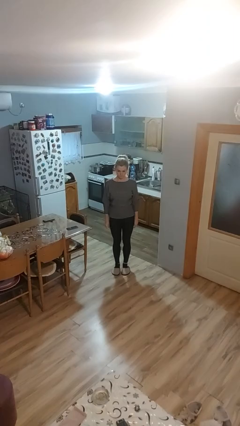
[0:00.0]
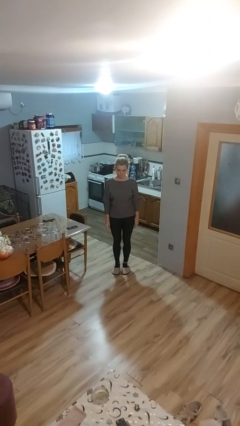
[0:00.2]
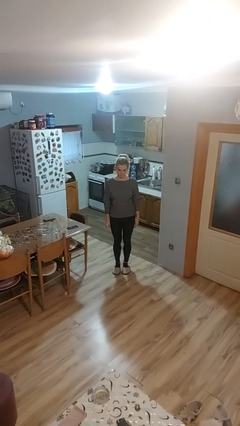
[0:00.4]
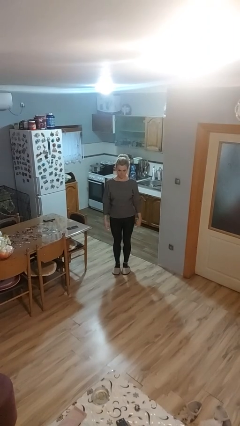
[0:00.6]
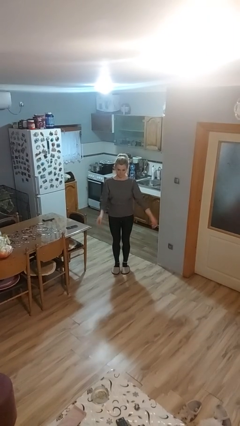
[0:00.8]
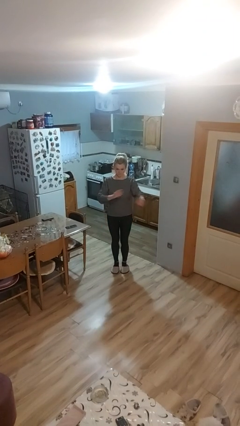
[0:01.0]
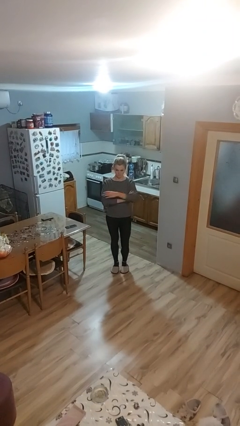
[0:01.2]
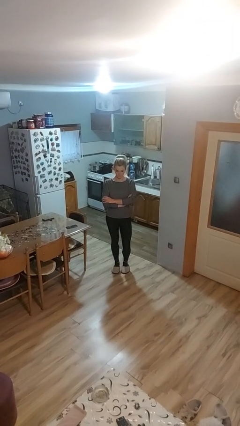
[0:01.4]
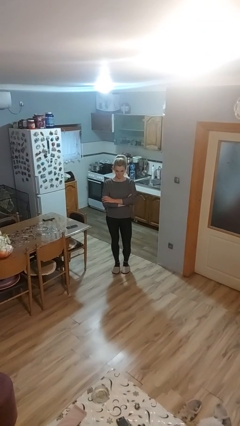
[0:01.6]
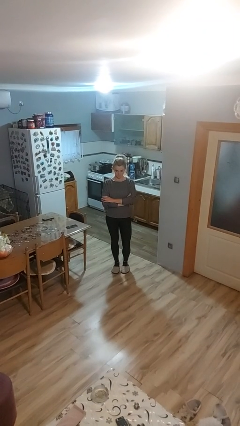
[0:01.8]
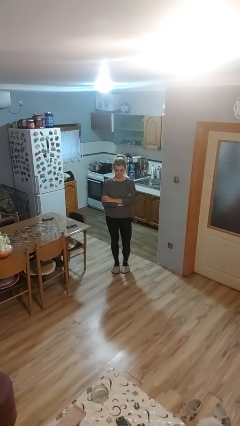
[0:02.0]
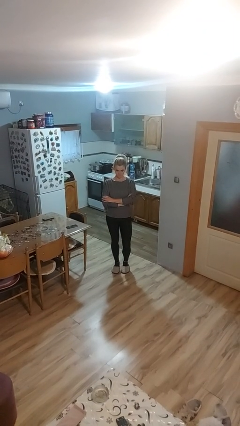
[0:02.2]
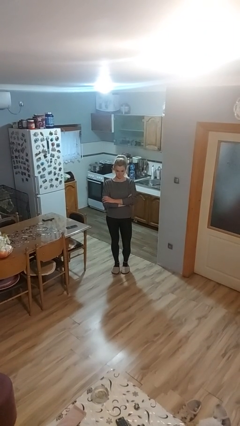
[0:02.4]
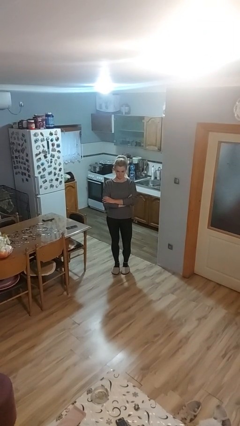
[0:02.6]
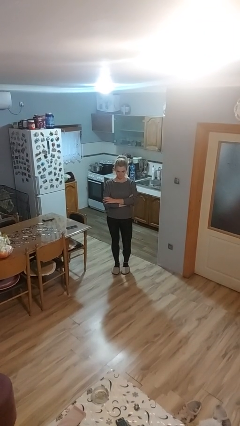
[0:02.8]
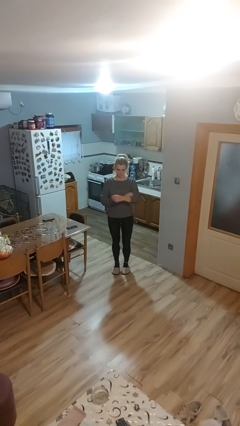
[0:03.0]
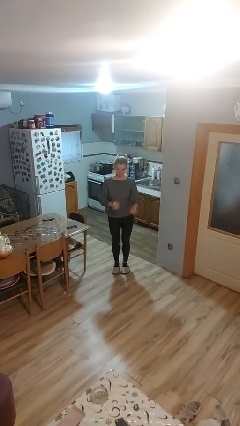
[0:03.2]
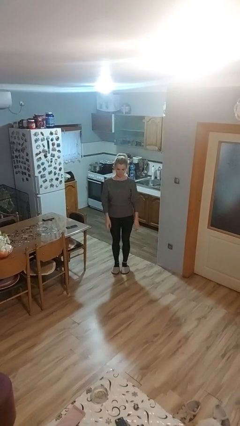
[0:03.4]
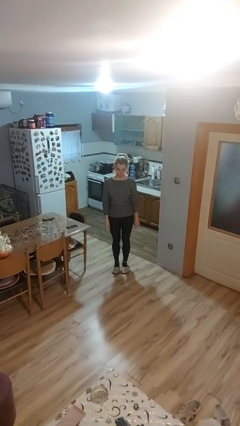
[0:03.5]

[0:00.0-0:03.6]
person crosses arms

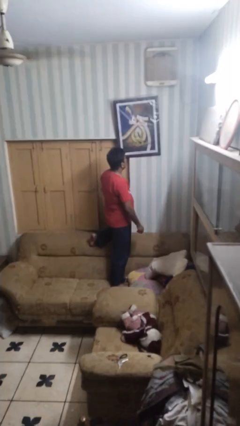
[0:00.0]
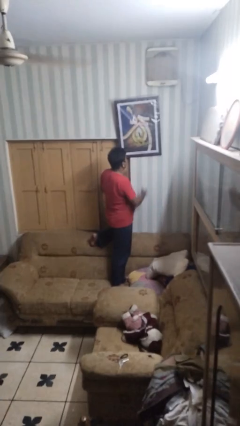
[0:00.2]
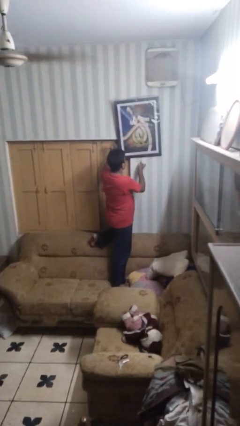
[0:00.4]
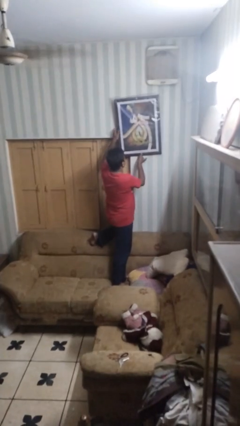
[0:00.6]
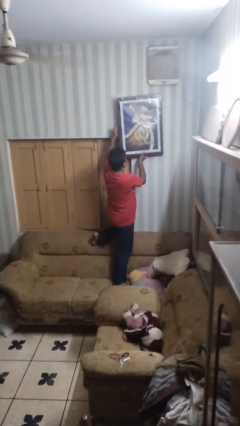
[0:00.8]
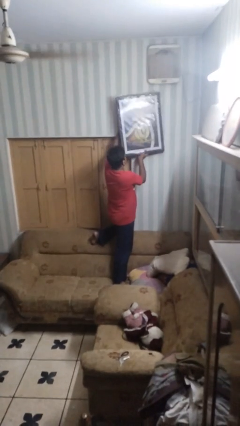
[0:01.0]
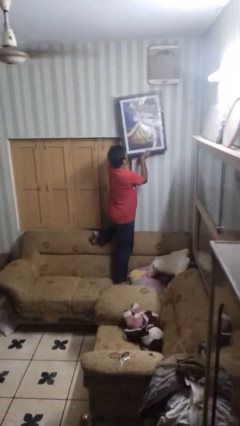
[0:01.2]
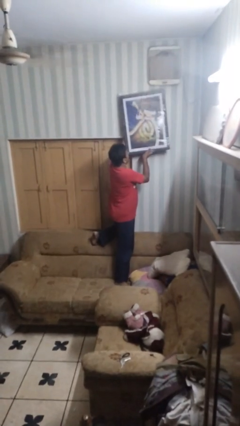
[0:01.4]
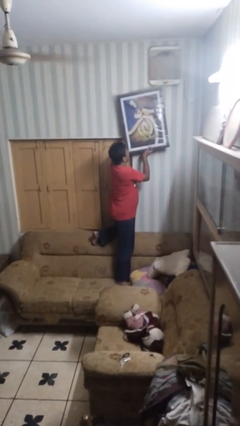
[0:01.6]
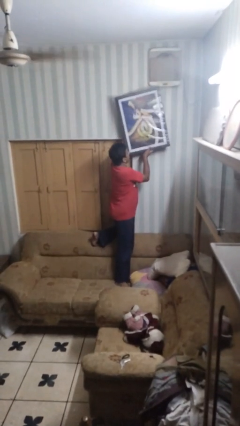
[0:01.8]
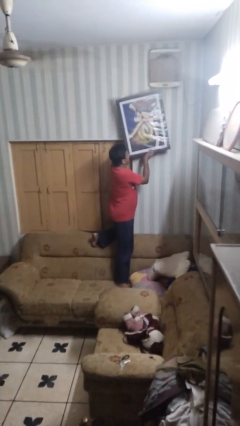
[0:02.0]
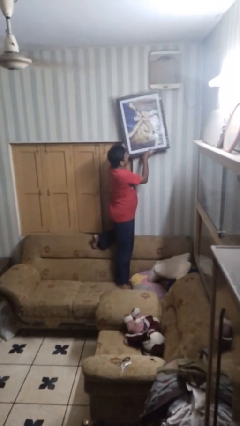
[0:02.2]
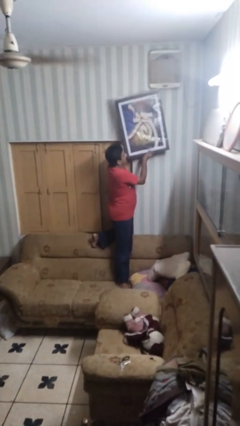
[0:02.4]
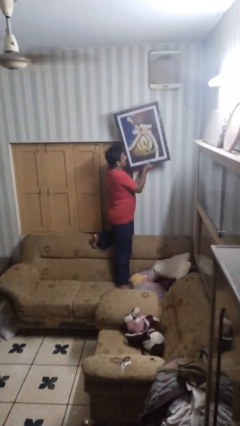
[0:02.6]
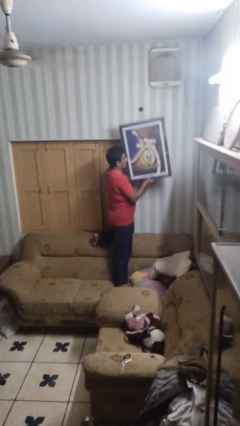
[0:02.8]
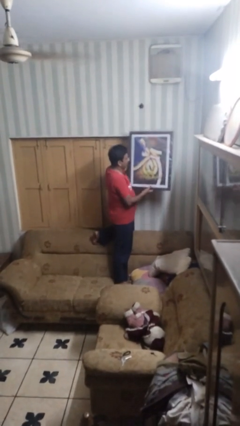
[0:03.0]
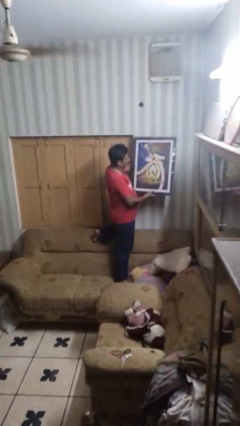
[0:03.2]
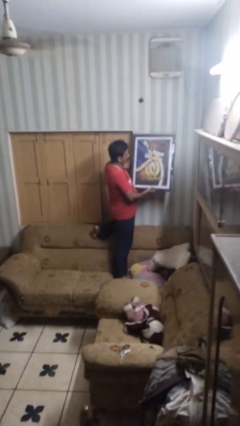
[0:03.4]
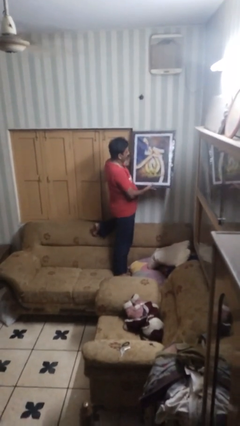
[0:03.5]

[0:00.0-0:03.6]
person takes down picture frame

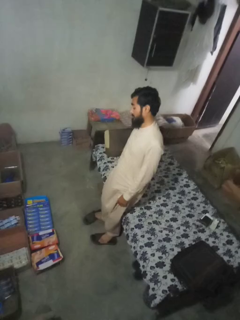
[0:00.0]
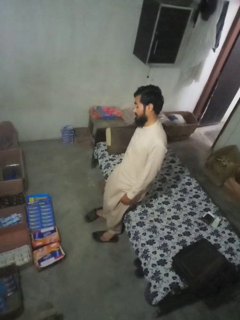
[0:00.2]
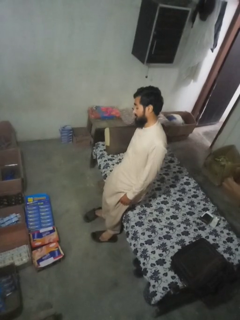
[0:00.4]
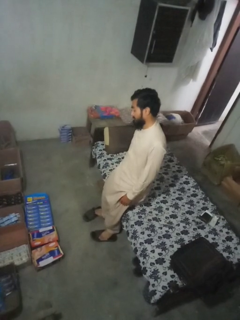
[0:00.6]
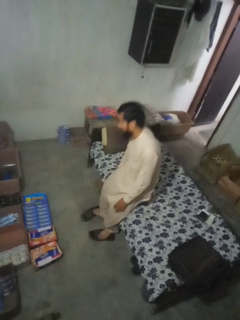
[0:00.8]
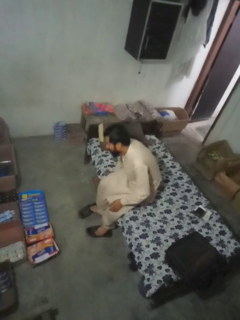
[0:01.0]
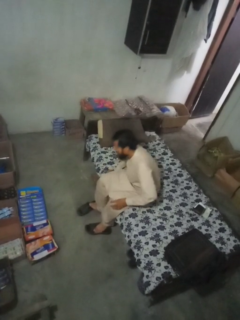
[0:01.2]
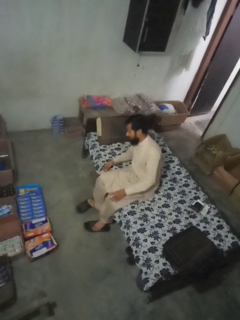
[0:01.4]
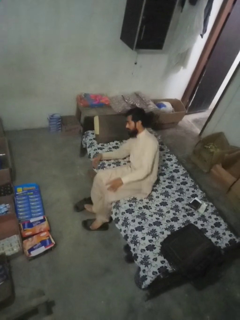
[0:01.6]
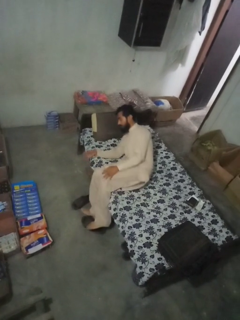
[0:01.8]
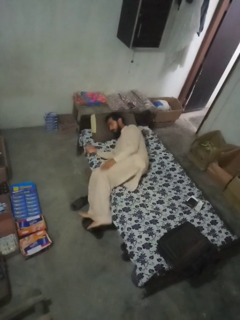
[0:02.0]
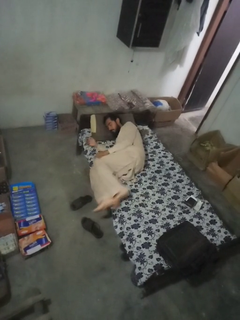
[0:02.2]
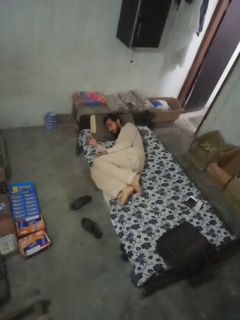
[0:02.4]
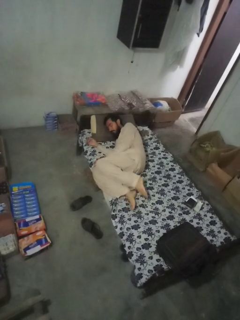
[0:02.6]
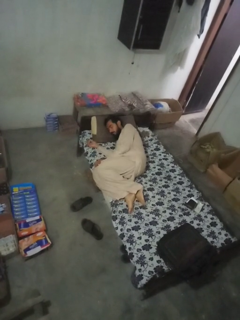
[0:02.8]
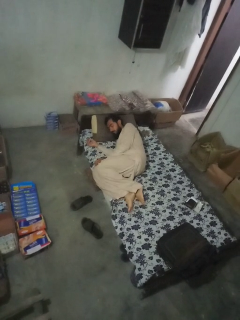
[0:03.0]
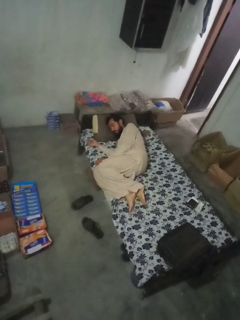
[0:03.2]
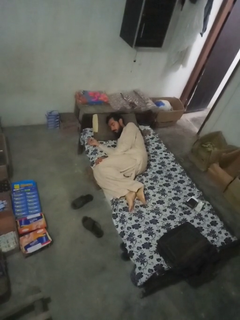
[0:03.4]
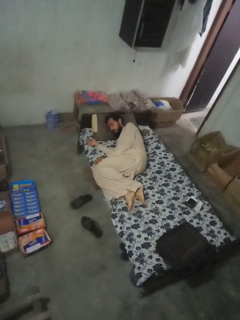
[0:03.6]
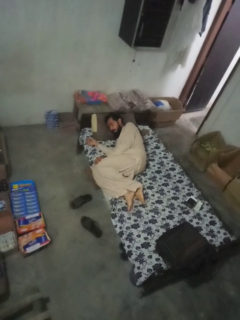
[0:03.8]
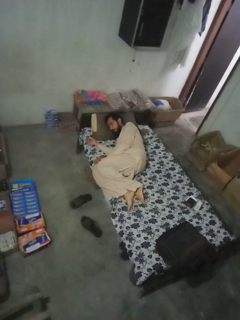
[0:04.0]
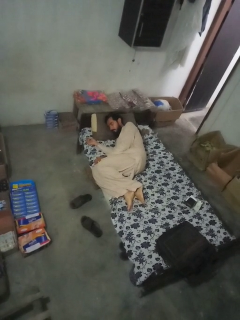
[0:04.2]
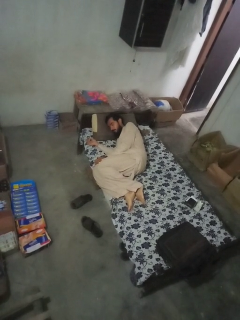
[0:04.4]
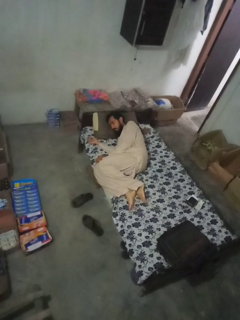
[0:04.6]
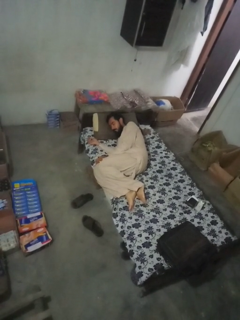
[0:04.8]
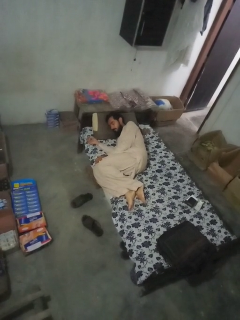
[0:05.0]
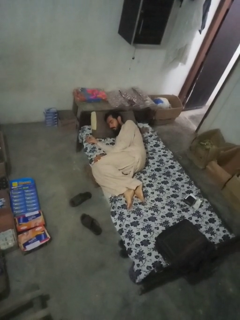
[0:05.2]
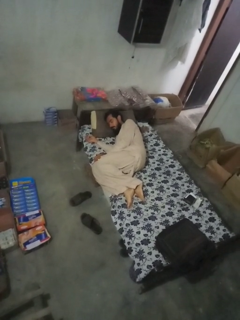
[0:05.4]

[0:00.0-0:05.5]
person lies down on bed

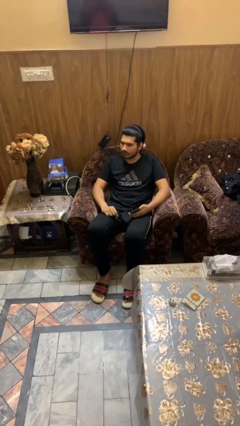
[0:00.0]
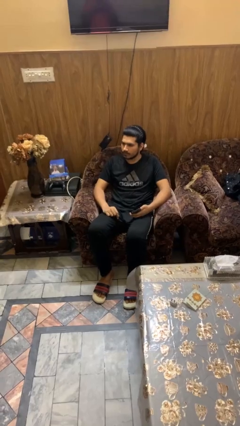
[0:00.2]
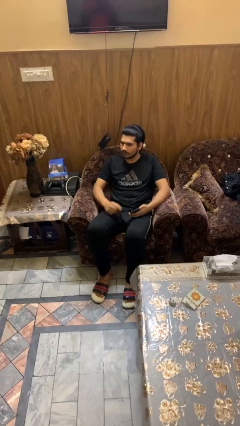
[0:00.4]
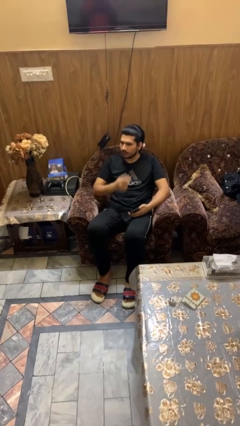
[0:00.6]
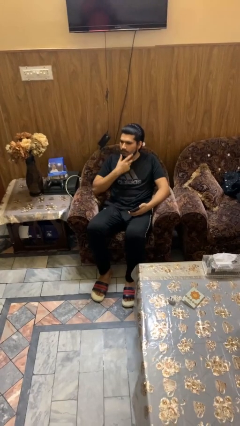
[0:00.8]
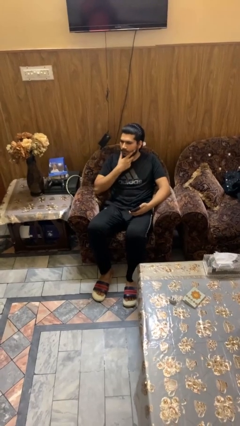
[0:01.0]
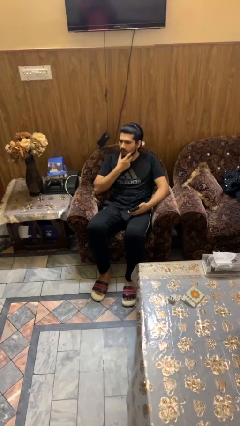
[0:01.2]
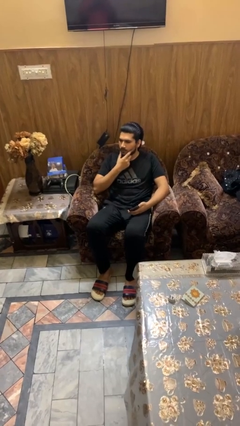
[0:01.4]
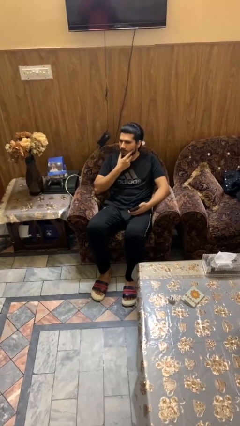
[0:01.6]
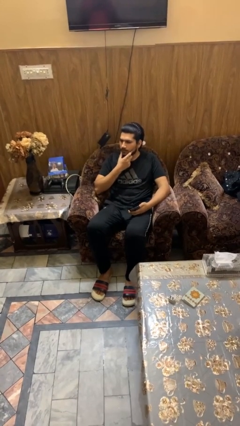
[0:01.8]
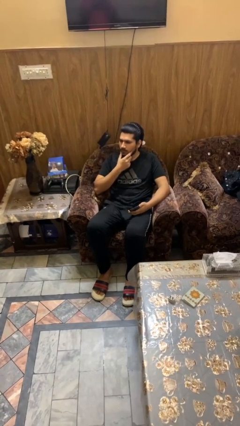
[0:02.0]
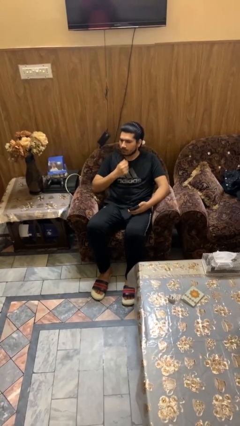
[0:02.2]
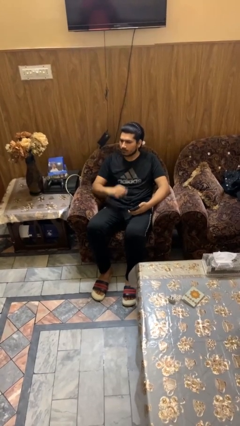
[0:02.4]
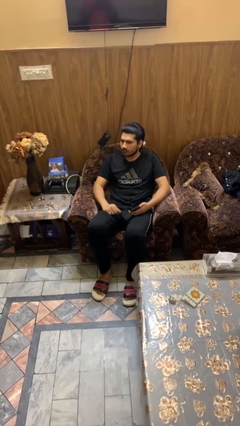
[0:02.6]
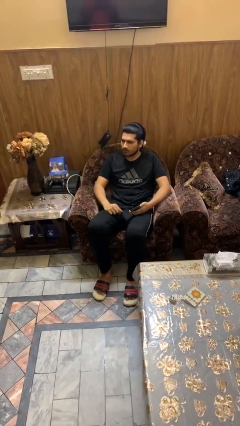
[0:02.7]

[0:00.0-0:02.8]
person strokes chin

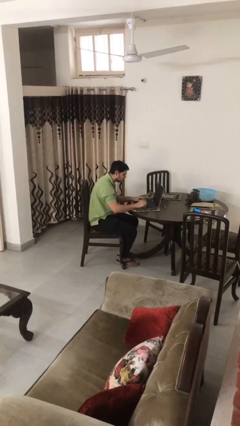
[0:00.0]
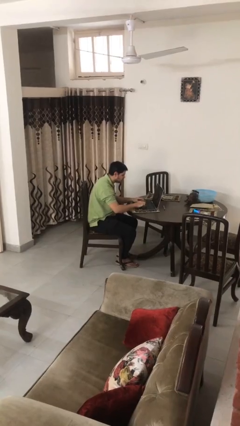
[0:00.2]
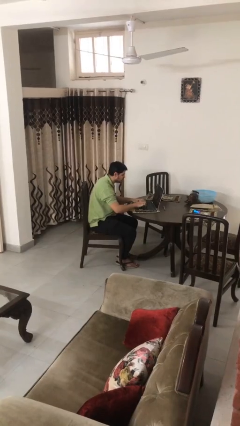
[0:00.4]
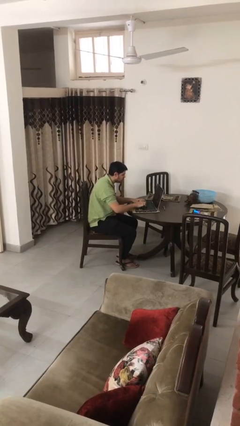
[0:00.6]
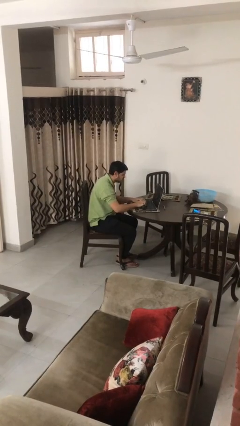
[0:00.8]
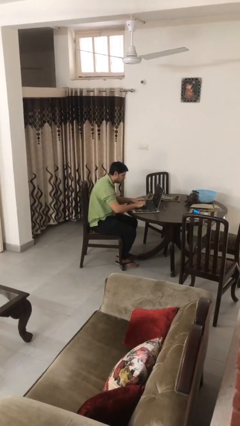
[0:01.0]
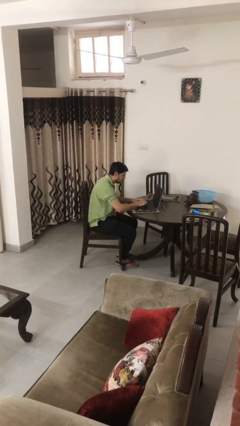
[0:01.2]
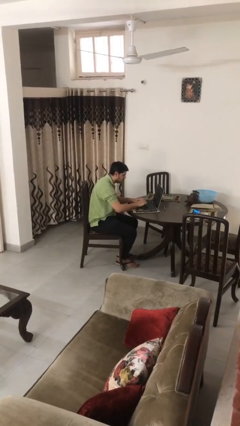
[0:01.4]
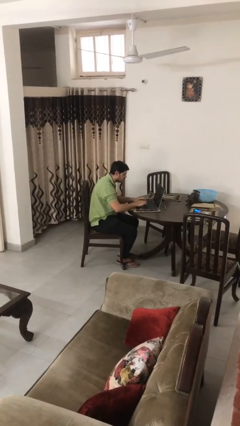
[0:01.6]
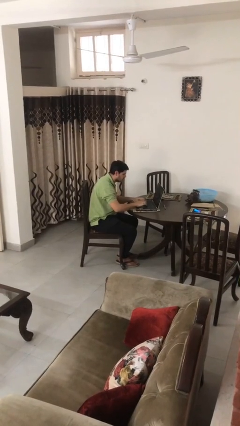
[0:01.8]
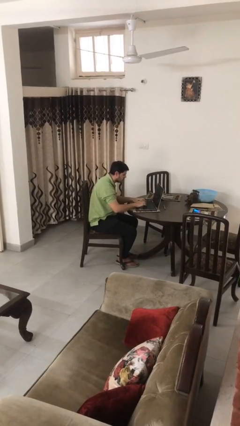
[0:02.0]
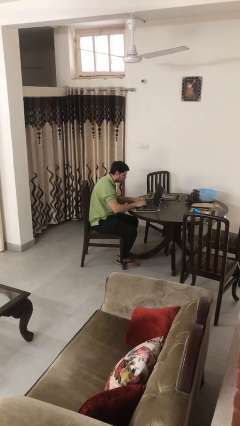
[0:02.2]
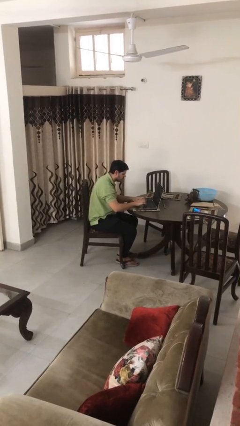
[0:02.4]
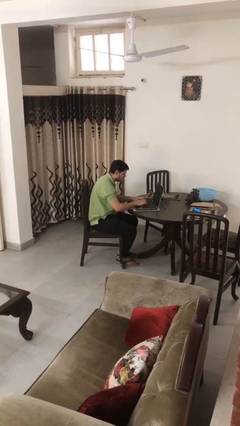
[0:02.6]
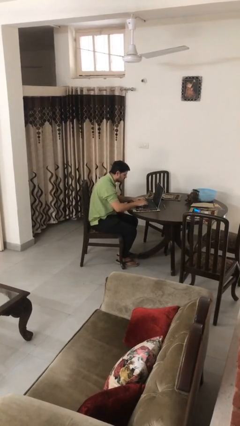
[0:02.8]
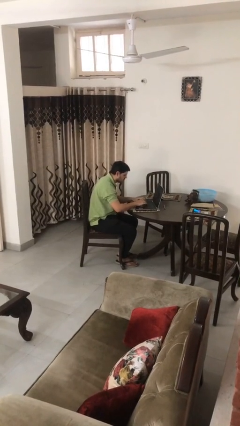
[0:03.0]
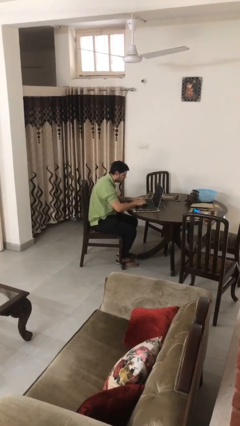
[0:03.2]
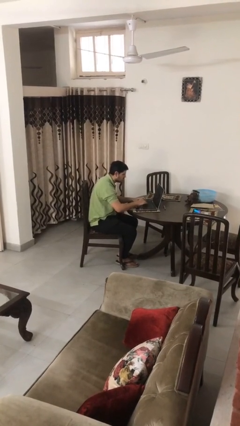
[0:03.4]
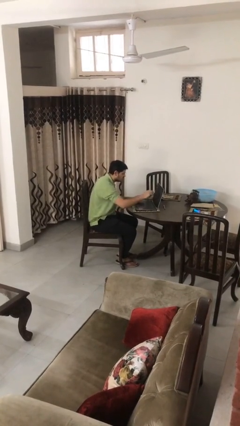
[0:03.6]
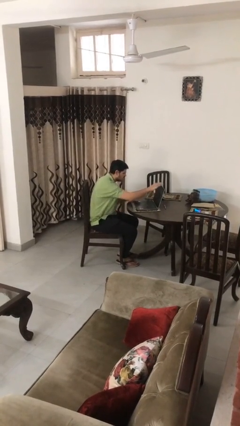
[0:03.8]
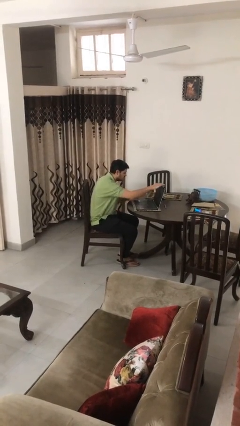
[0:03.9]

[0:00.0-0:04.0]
person interacts with laptop
